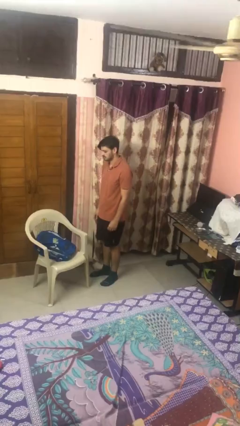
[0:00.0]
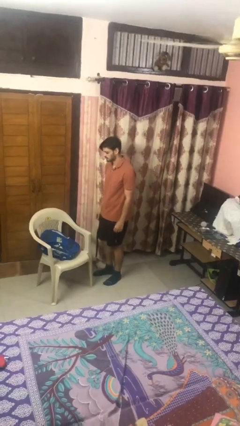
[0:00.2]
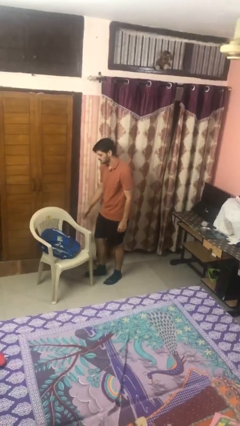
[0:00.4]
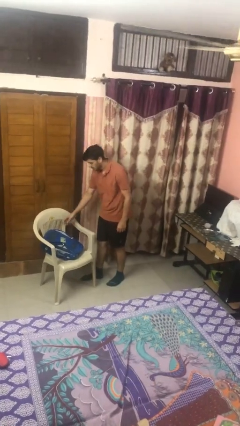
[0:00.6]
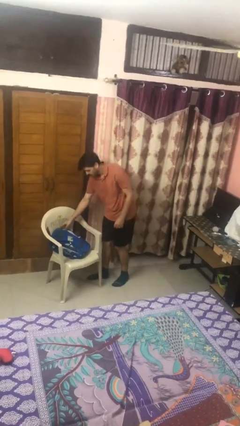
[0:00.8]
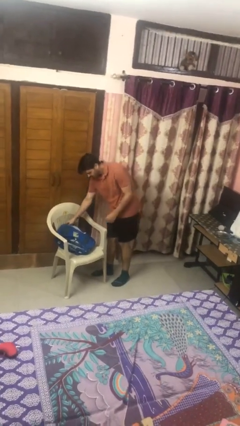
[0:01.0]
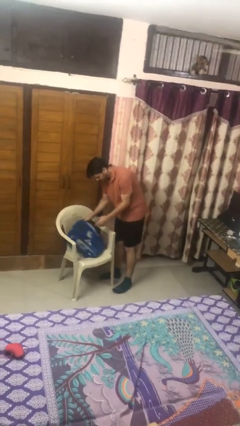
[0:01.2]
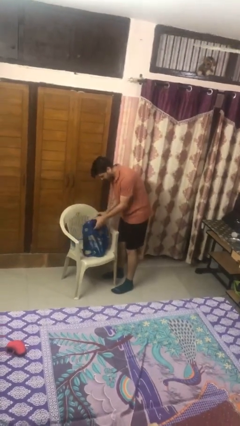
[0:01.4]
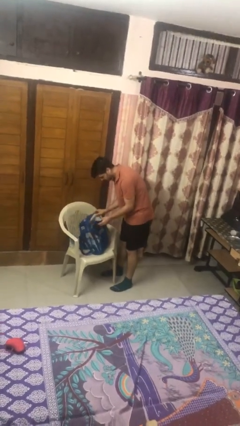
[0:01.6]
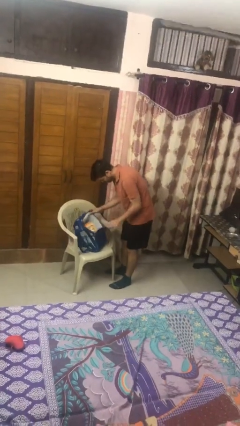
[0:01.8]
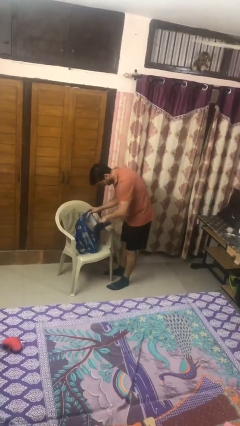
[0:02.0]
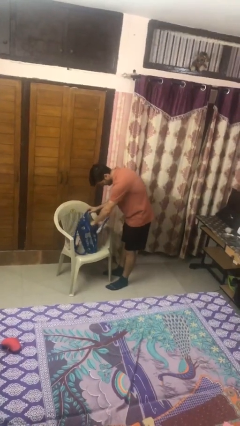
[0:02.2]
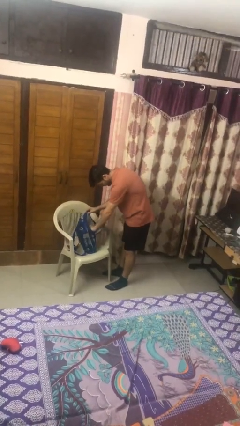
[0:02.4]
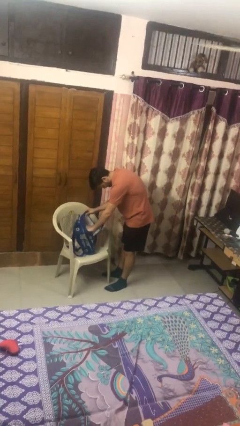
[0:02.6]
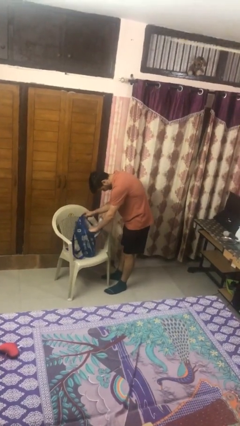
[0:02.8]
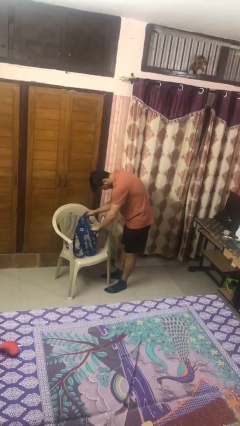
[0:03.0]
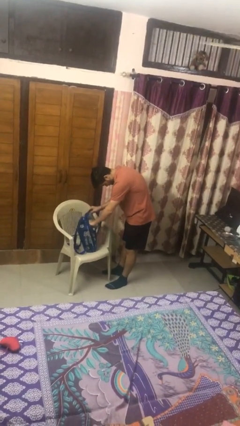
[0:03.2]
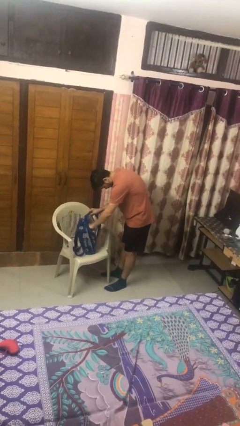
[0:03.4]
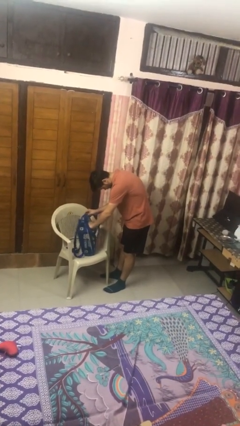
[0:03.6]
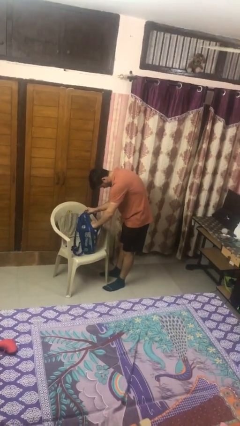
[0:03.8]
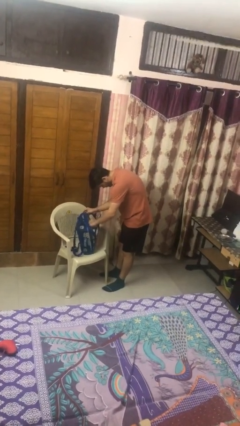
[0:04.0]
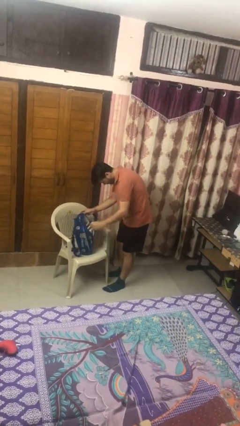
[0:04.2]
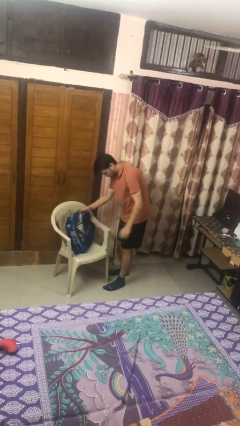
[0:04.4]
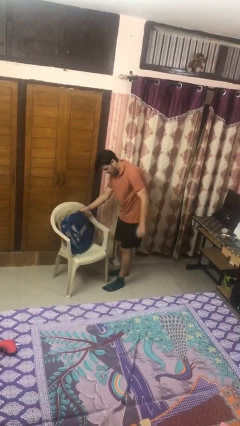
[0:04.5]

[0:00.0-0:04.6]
person searches in bag

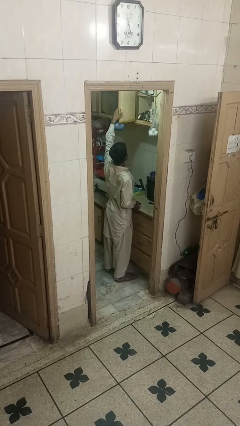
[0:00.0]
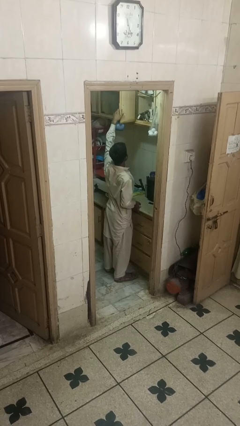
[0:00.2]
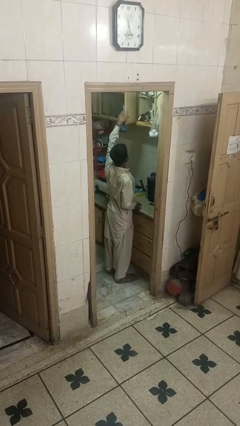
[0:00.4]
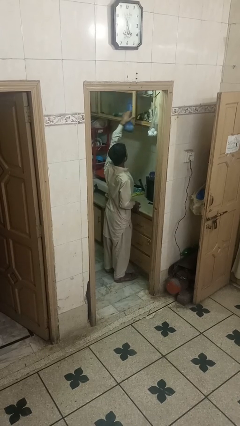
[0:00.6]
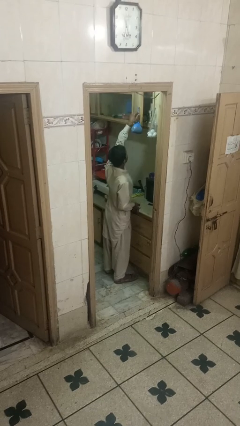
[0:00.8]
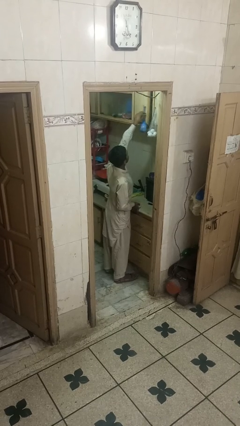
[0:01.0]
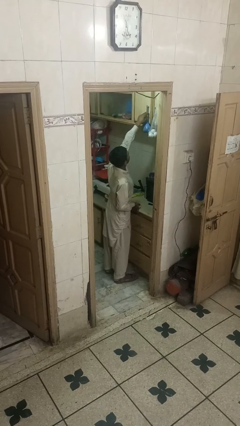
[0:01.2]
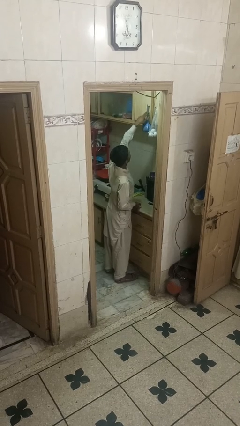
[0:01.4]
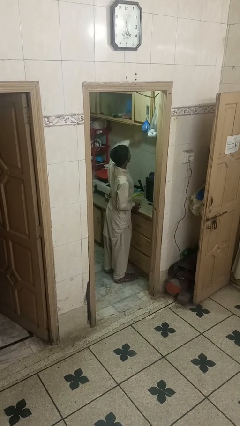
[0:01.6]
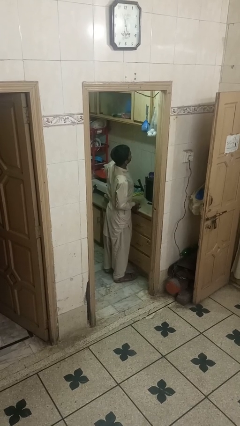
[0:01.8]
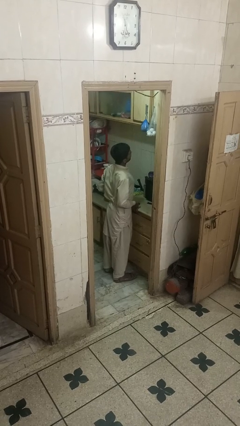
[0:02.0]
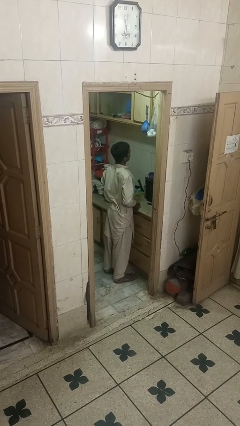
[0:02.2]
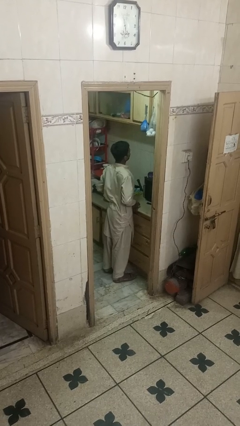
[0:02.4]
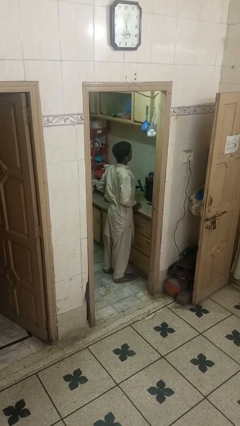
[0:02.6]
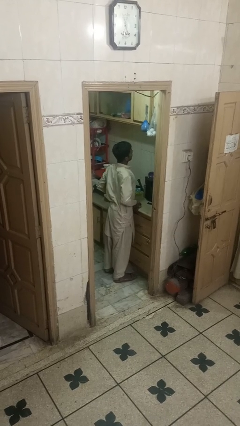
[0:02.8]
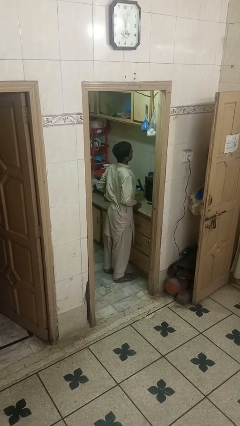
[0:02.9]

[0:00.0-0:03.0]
person closes cabinet

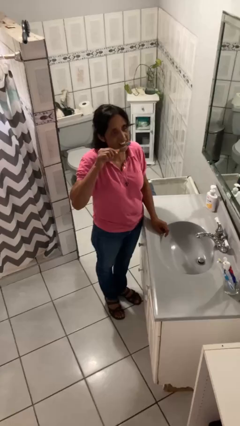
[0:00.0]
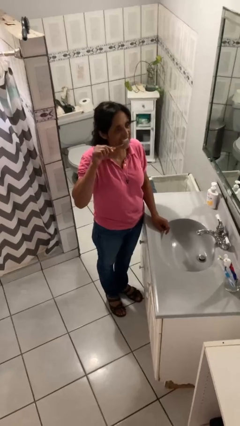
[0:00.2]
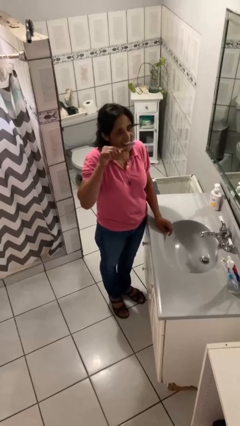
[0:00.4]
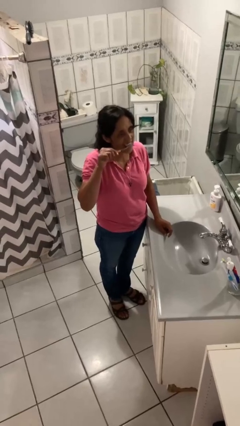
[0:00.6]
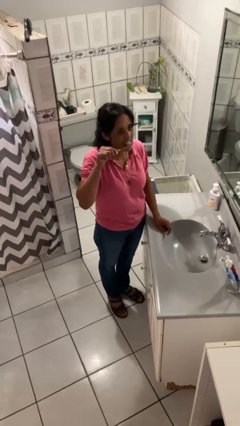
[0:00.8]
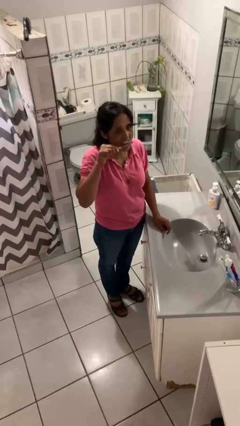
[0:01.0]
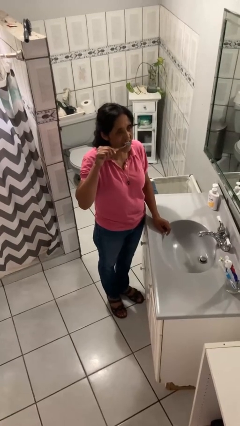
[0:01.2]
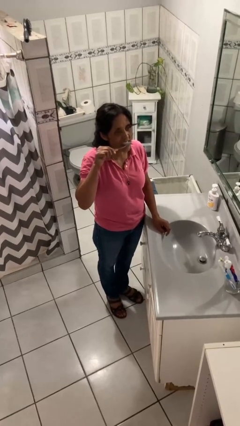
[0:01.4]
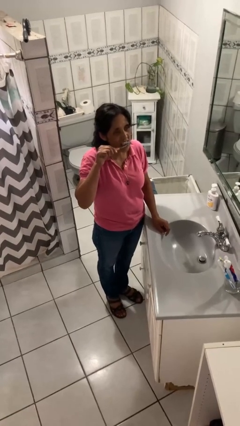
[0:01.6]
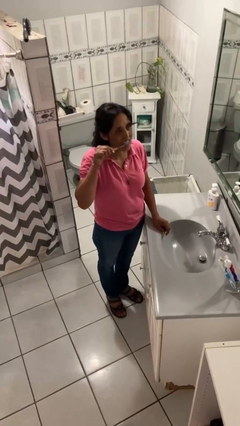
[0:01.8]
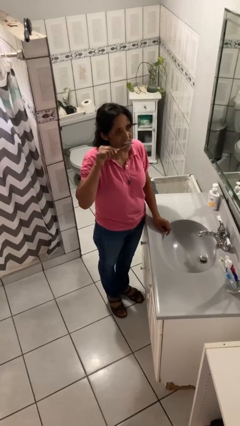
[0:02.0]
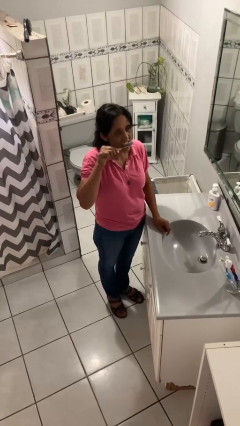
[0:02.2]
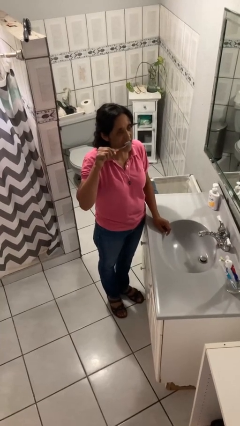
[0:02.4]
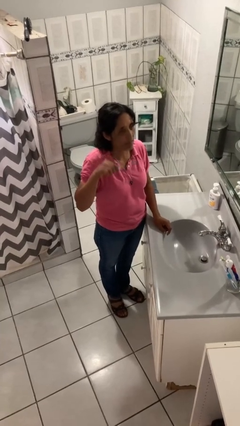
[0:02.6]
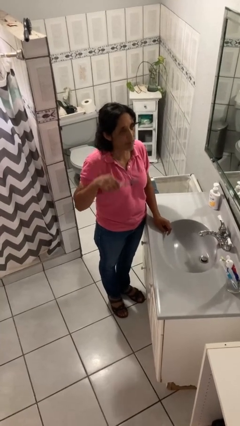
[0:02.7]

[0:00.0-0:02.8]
person brushes teeth

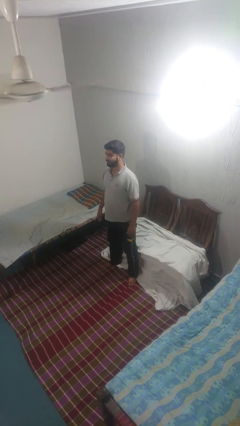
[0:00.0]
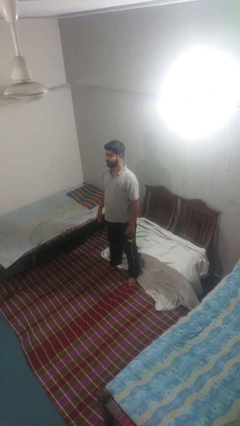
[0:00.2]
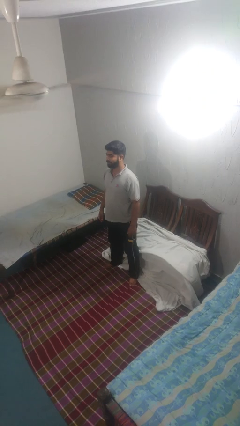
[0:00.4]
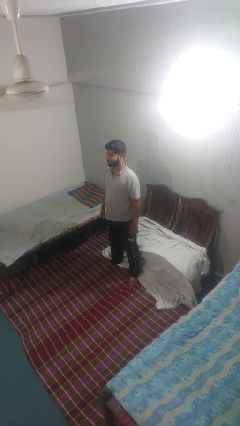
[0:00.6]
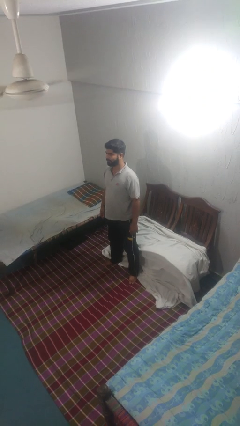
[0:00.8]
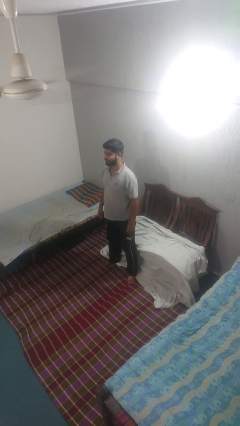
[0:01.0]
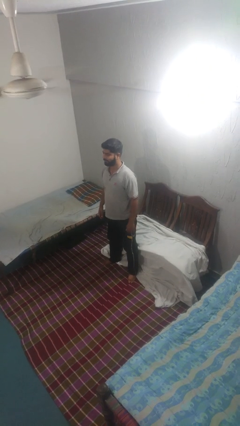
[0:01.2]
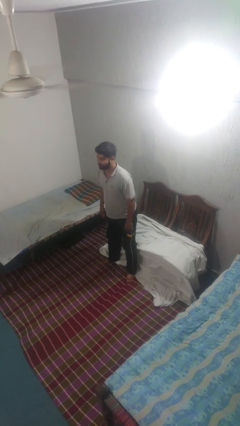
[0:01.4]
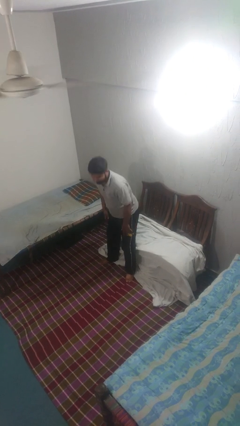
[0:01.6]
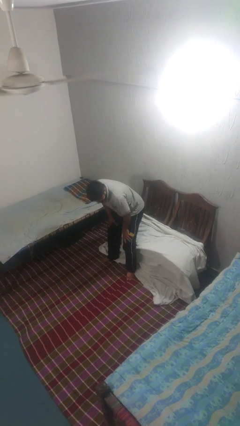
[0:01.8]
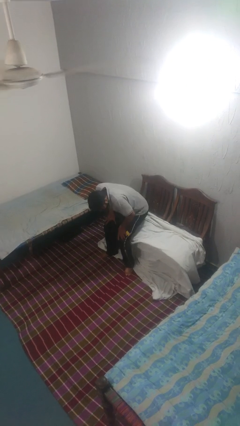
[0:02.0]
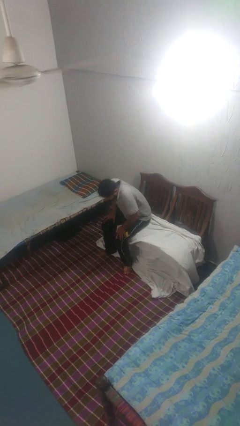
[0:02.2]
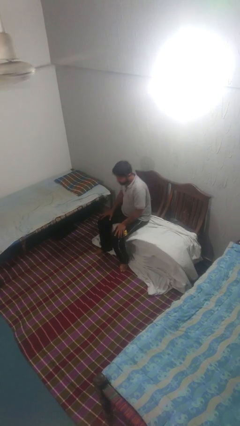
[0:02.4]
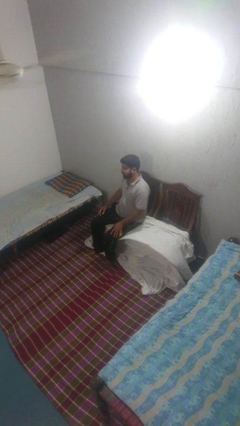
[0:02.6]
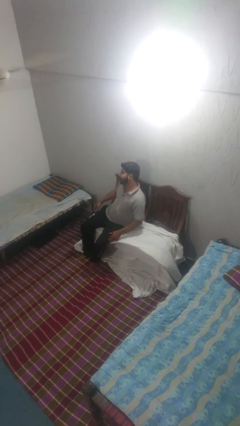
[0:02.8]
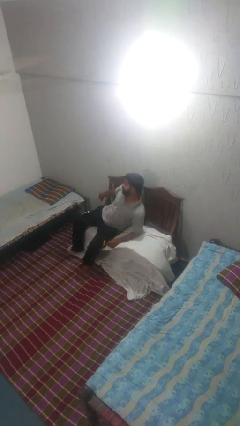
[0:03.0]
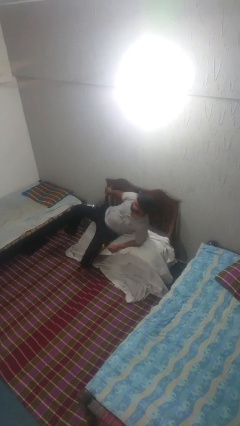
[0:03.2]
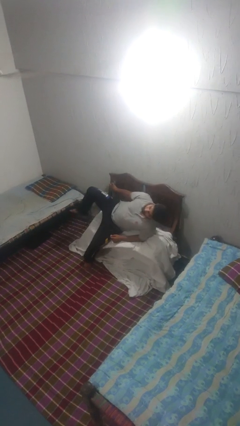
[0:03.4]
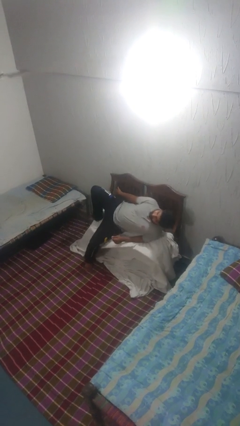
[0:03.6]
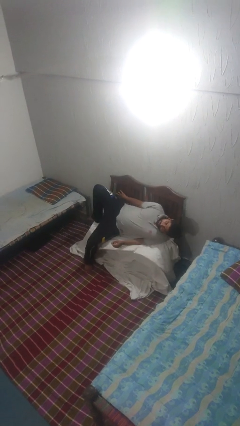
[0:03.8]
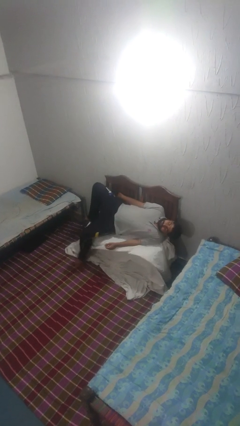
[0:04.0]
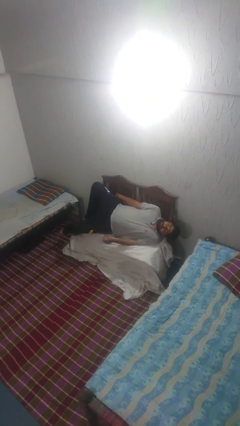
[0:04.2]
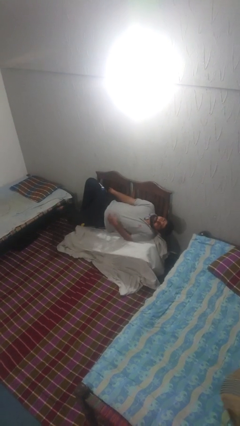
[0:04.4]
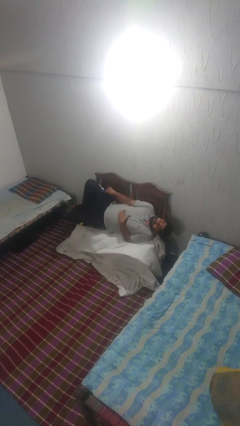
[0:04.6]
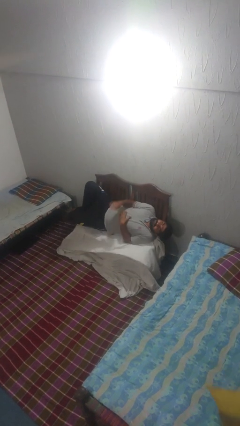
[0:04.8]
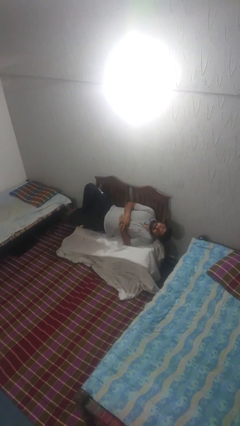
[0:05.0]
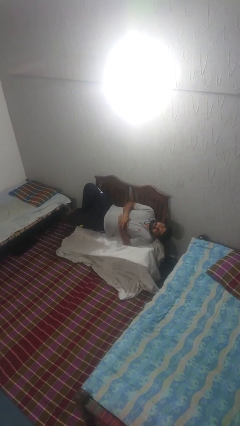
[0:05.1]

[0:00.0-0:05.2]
person lies down on couch

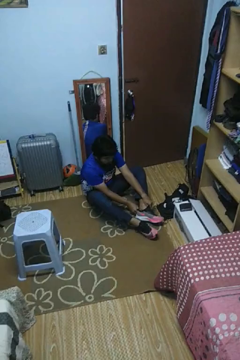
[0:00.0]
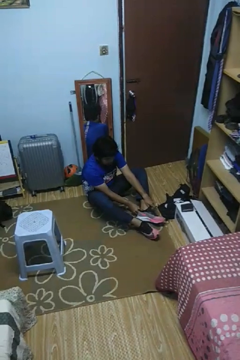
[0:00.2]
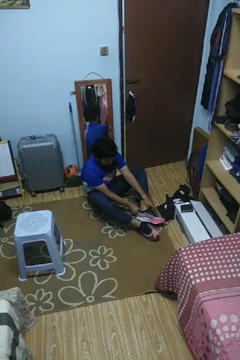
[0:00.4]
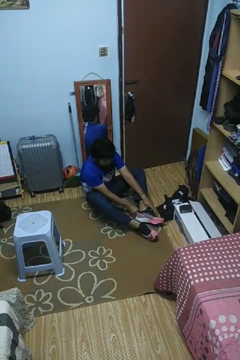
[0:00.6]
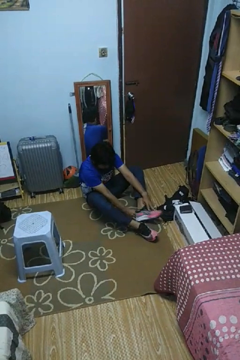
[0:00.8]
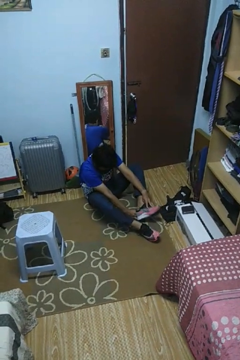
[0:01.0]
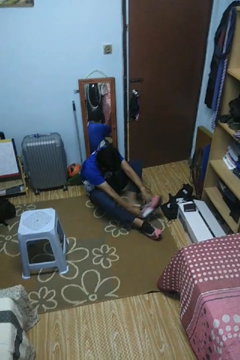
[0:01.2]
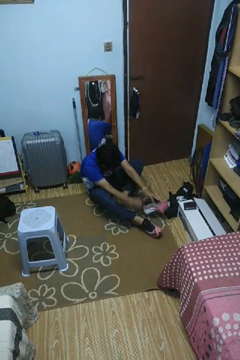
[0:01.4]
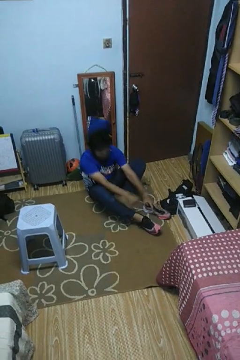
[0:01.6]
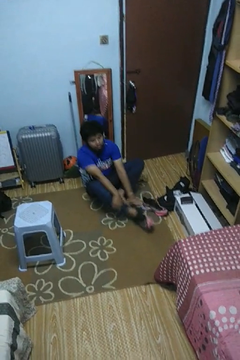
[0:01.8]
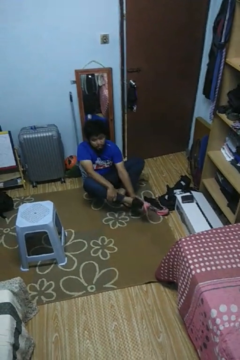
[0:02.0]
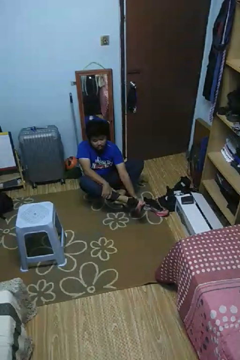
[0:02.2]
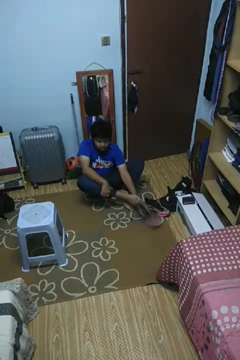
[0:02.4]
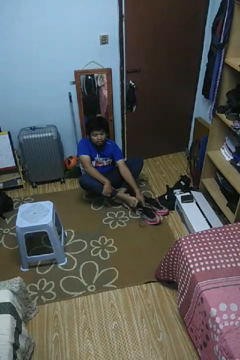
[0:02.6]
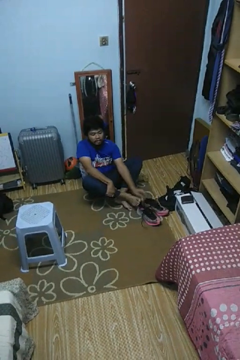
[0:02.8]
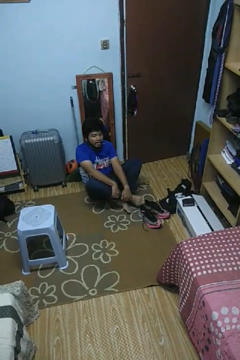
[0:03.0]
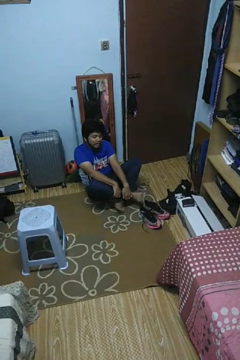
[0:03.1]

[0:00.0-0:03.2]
person takes off shoes
